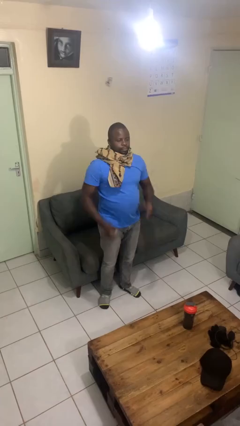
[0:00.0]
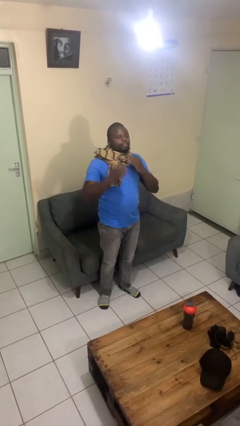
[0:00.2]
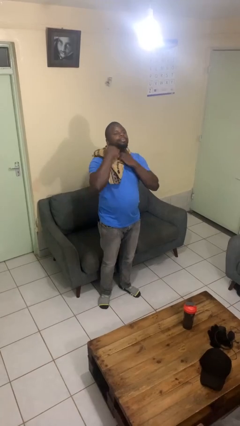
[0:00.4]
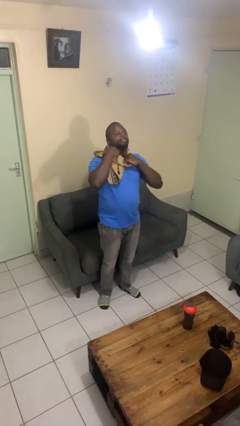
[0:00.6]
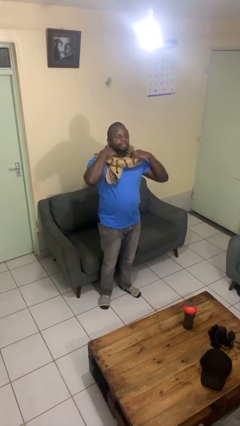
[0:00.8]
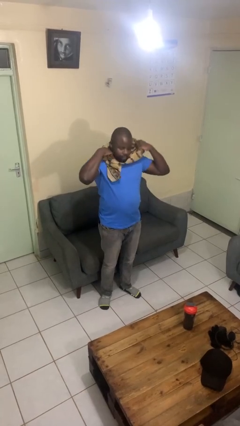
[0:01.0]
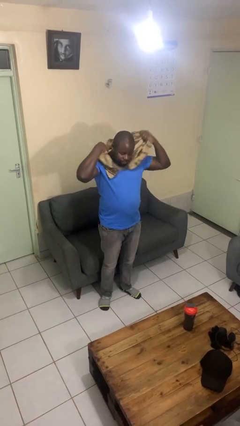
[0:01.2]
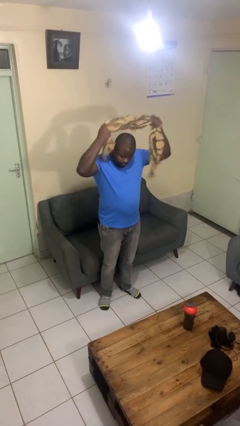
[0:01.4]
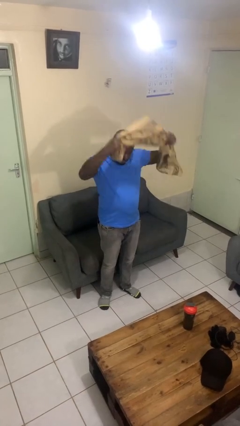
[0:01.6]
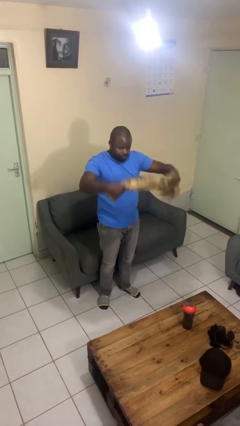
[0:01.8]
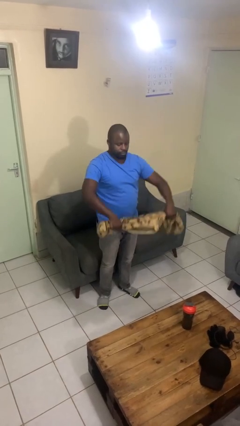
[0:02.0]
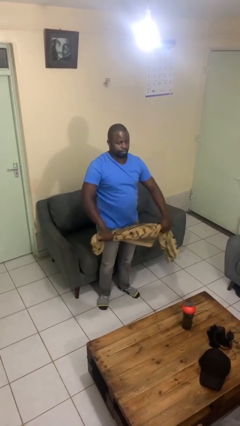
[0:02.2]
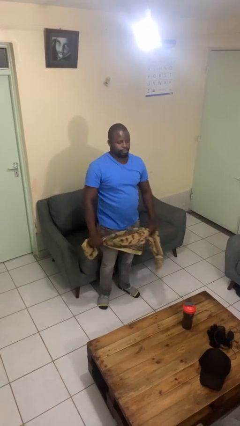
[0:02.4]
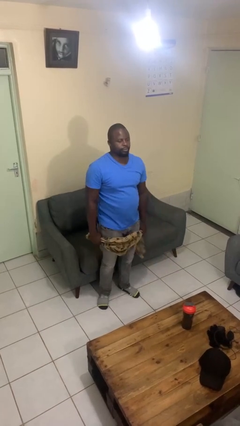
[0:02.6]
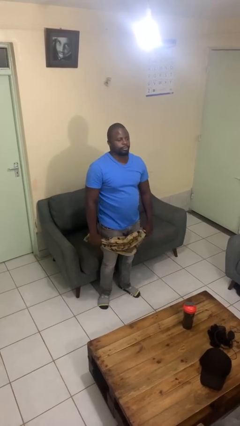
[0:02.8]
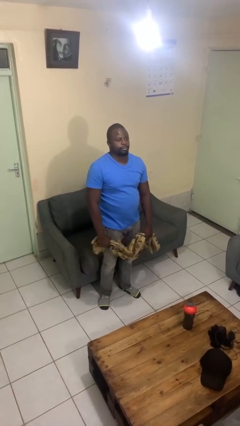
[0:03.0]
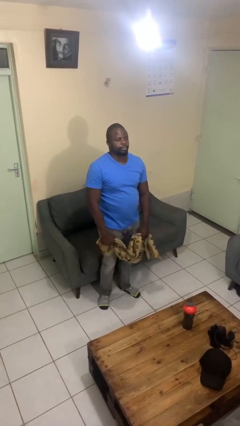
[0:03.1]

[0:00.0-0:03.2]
person takes off scarf

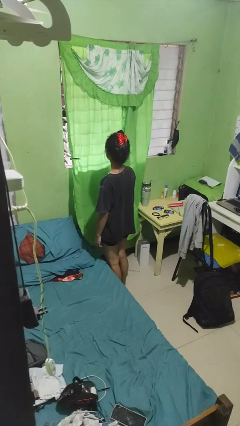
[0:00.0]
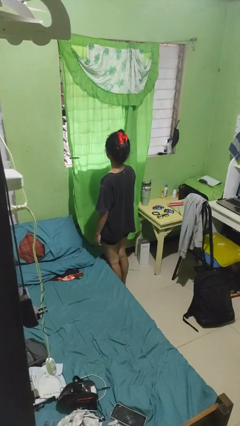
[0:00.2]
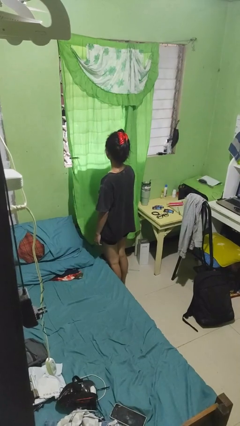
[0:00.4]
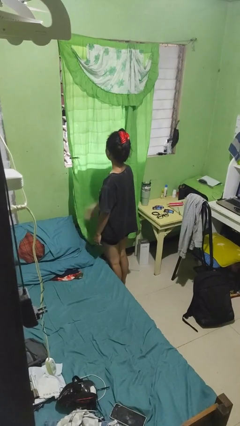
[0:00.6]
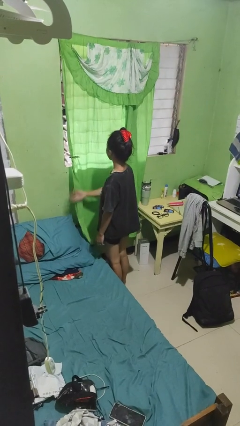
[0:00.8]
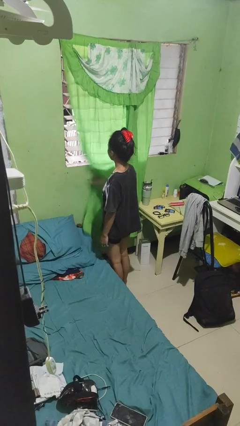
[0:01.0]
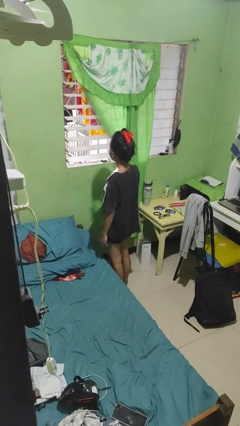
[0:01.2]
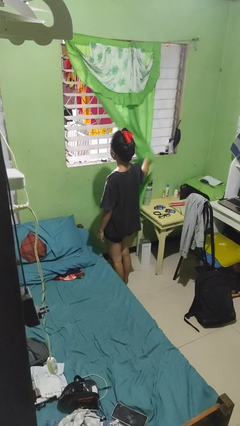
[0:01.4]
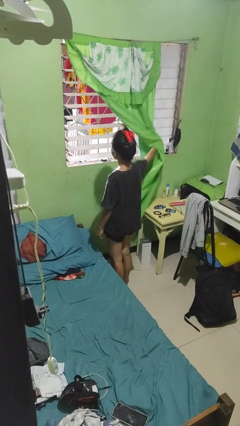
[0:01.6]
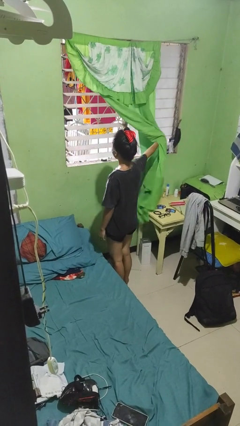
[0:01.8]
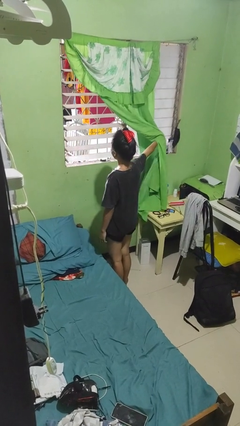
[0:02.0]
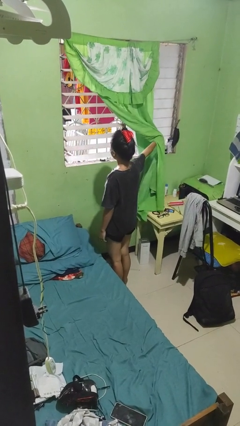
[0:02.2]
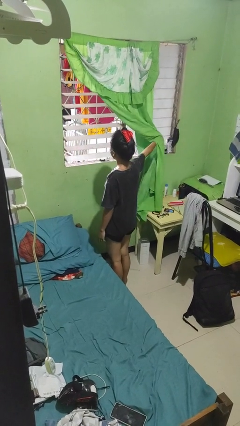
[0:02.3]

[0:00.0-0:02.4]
person opens curtains

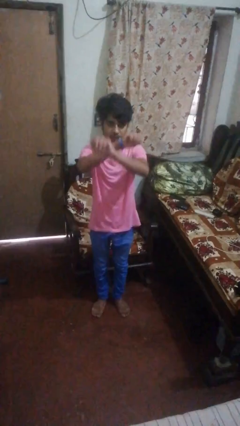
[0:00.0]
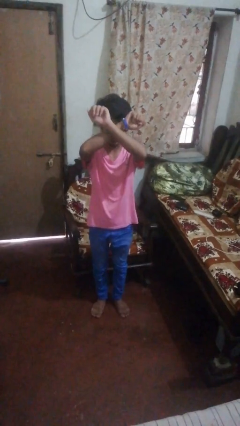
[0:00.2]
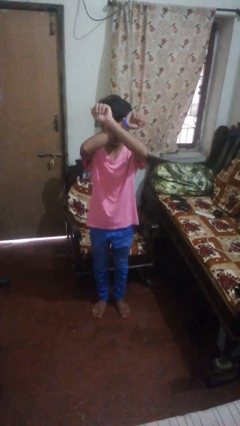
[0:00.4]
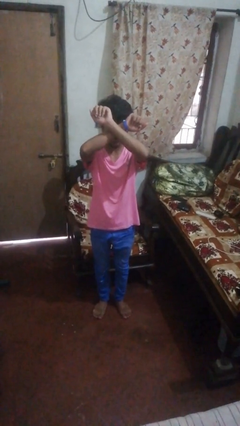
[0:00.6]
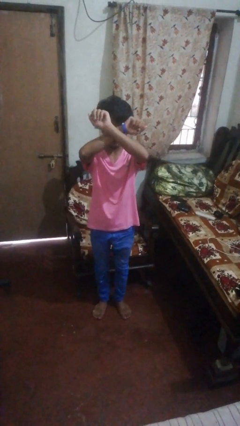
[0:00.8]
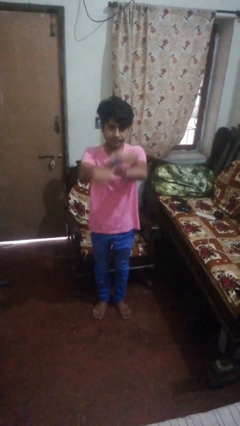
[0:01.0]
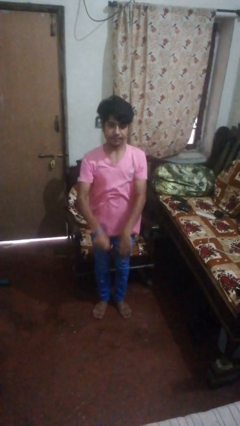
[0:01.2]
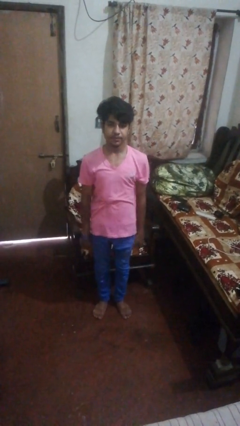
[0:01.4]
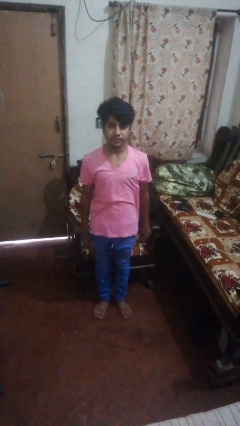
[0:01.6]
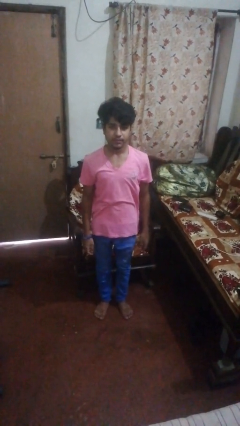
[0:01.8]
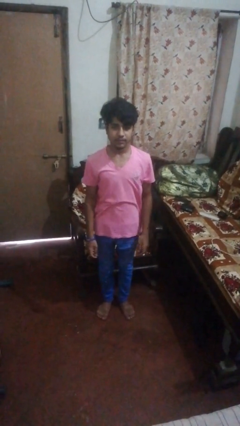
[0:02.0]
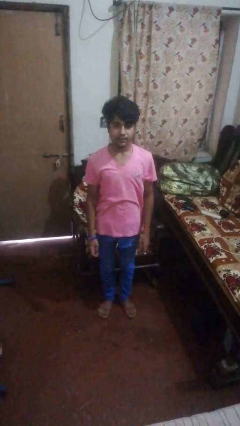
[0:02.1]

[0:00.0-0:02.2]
person karate chop

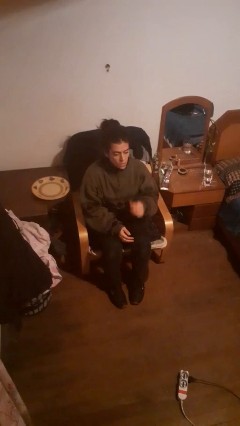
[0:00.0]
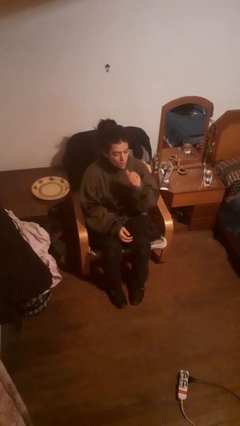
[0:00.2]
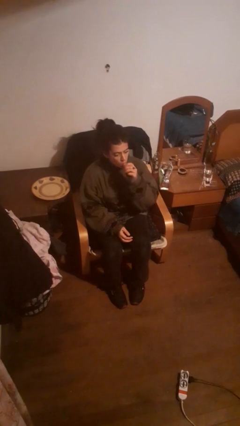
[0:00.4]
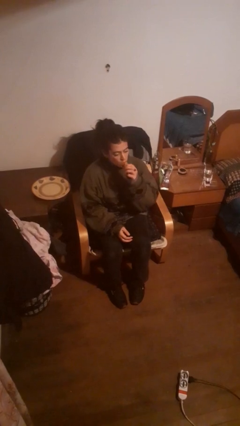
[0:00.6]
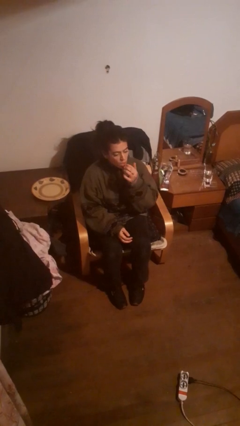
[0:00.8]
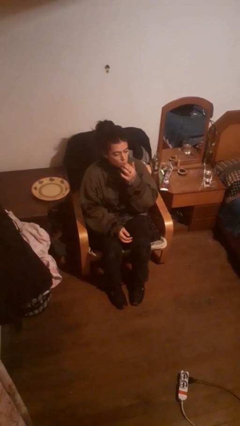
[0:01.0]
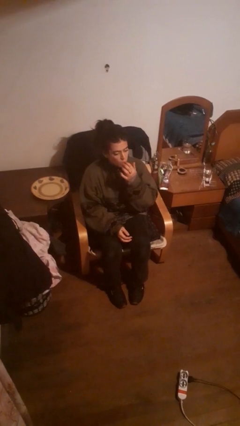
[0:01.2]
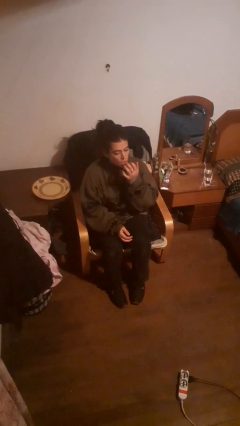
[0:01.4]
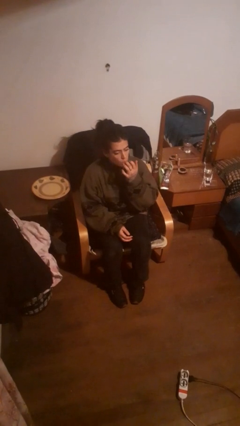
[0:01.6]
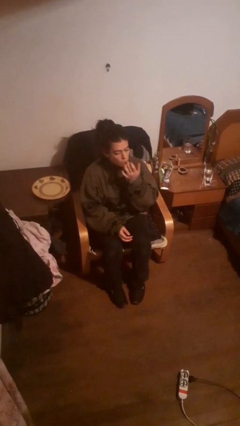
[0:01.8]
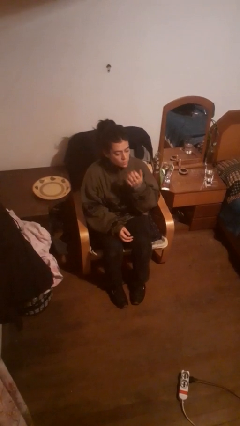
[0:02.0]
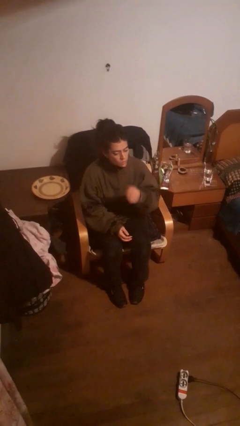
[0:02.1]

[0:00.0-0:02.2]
person licks fingers

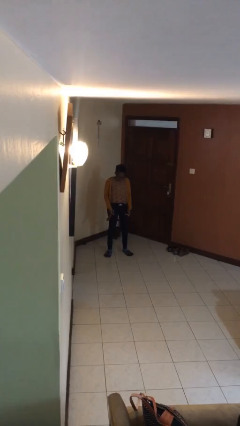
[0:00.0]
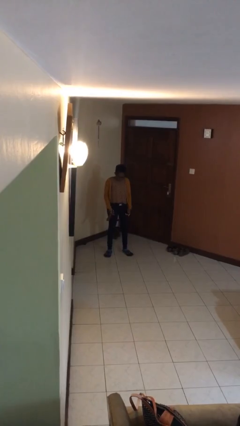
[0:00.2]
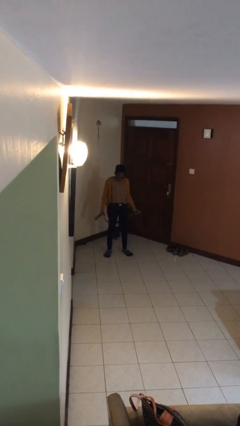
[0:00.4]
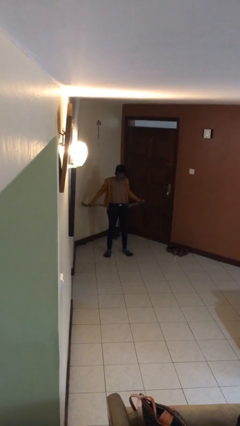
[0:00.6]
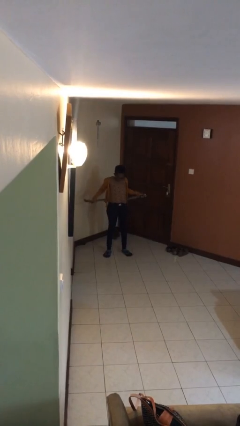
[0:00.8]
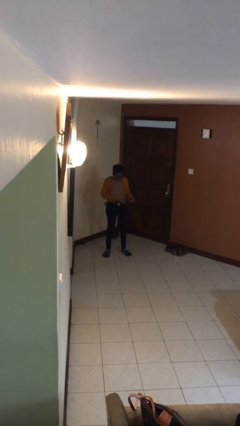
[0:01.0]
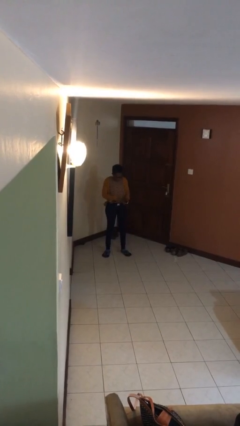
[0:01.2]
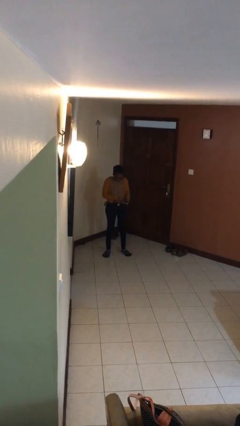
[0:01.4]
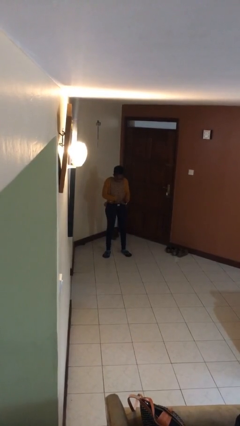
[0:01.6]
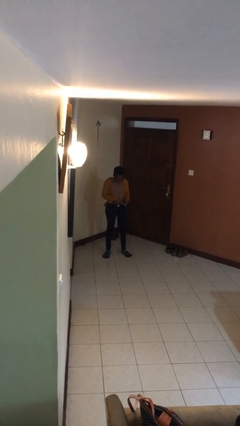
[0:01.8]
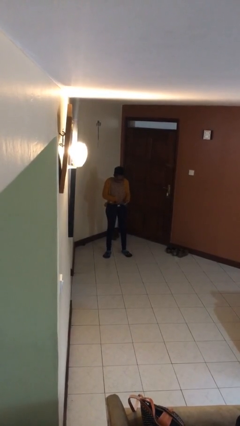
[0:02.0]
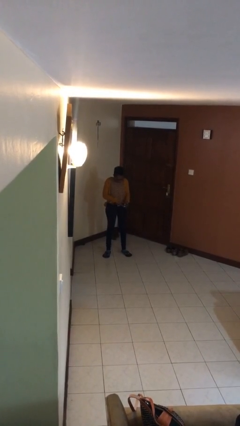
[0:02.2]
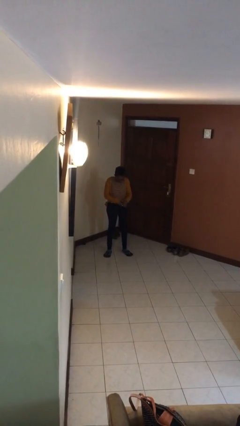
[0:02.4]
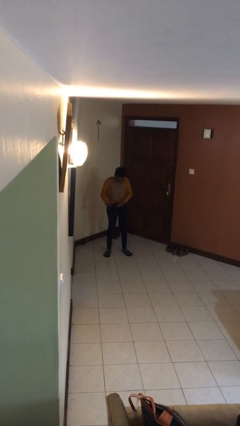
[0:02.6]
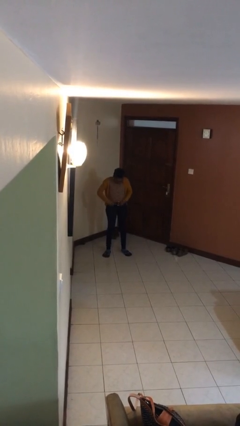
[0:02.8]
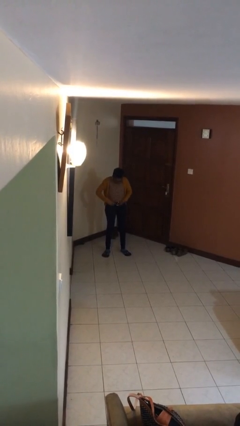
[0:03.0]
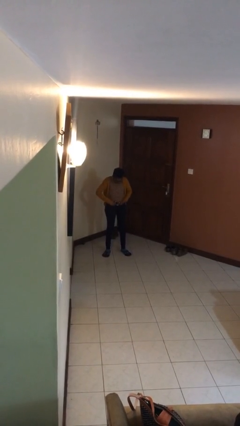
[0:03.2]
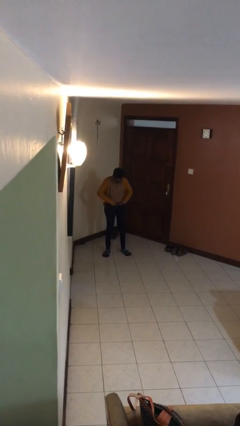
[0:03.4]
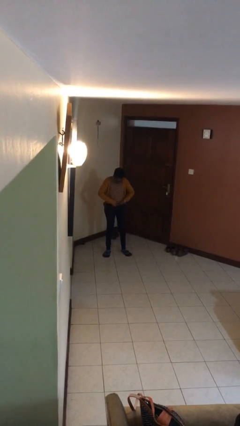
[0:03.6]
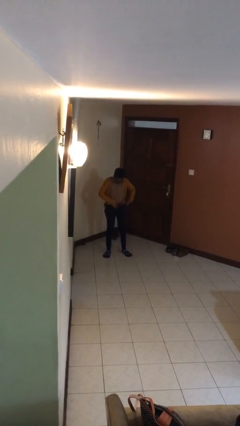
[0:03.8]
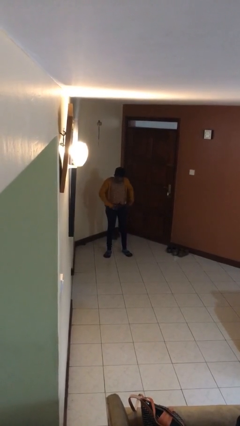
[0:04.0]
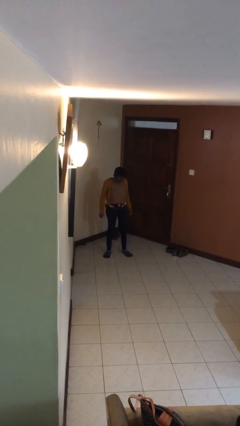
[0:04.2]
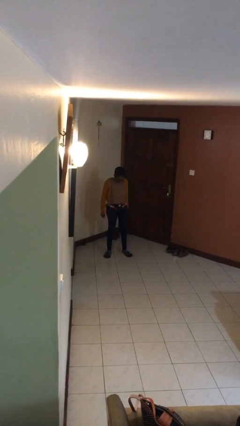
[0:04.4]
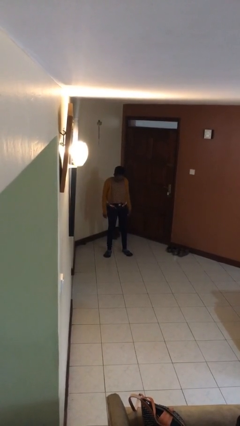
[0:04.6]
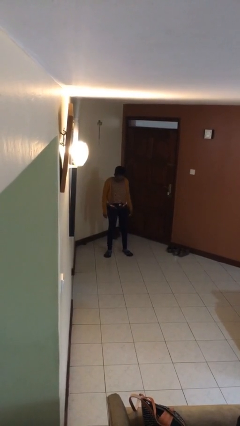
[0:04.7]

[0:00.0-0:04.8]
person puts on belt

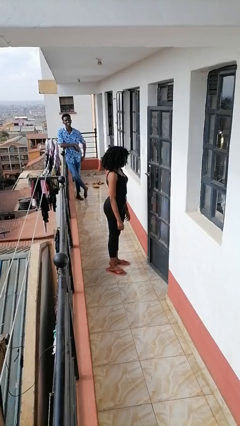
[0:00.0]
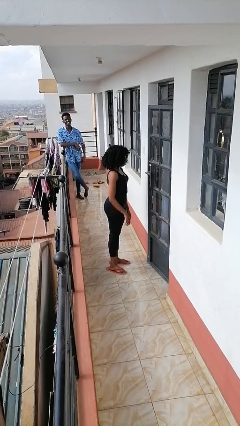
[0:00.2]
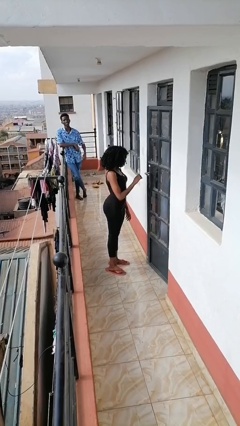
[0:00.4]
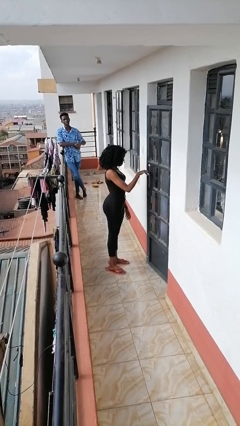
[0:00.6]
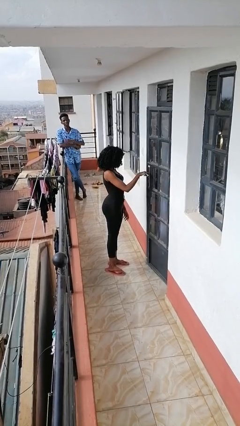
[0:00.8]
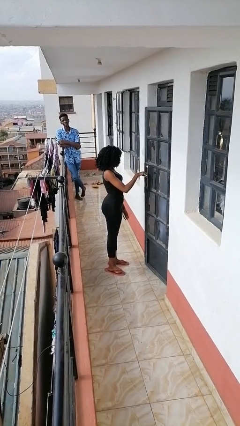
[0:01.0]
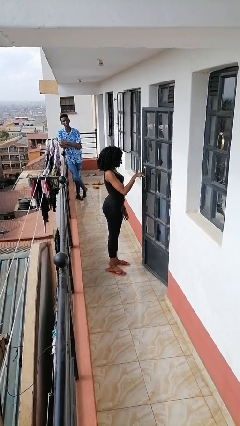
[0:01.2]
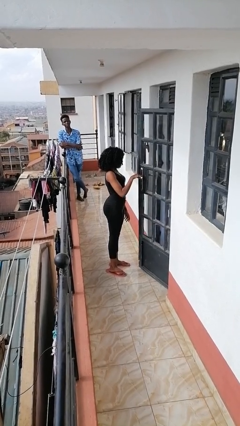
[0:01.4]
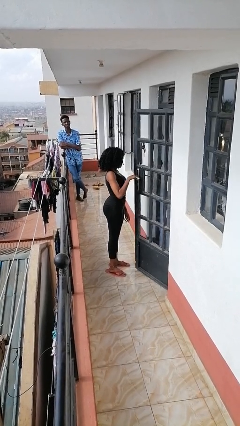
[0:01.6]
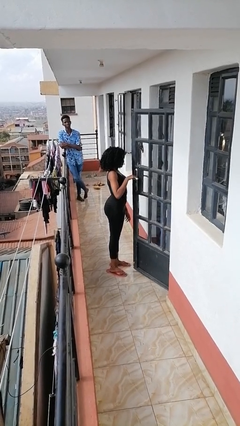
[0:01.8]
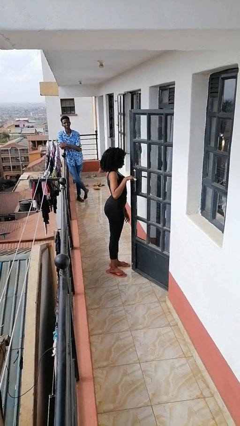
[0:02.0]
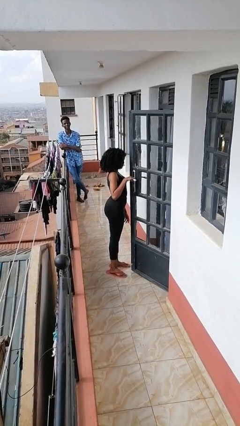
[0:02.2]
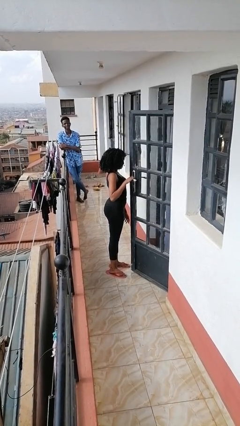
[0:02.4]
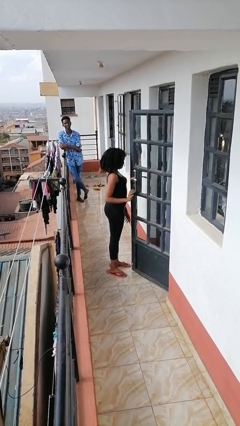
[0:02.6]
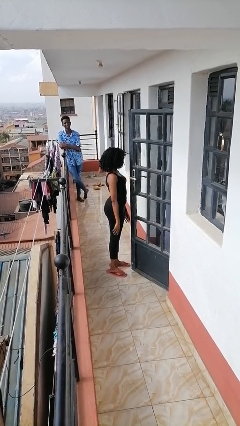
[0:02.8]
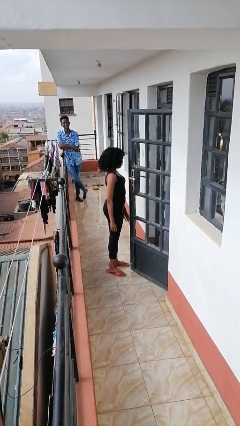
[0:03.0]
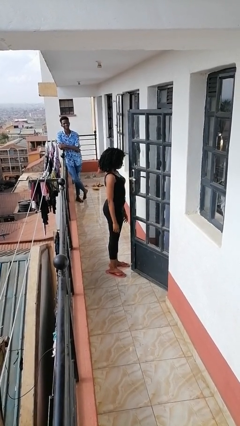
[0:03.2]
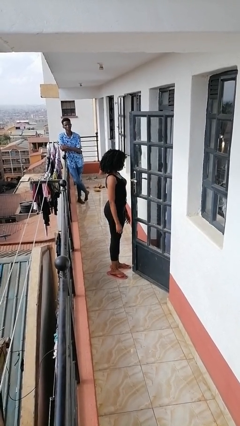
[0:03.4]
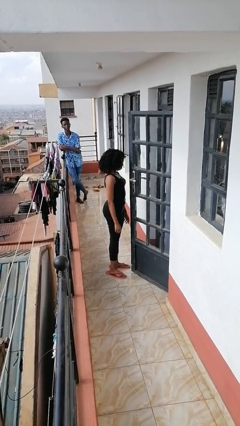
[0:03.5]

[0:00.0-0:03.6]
person opens facility door
